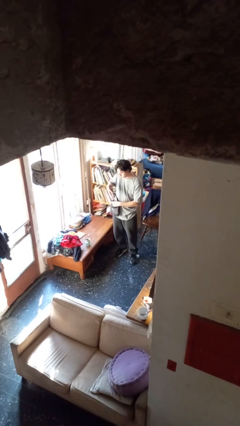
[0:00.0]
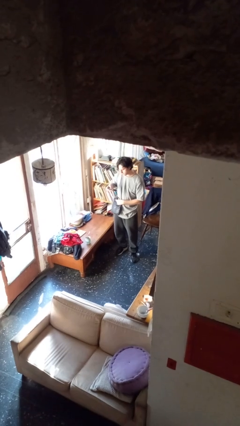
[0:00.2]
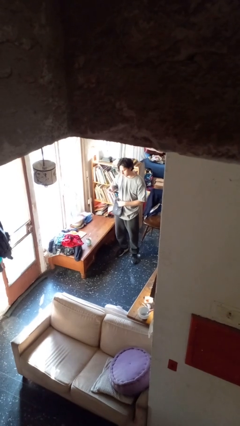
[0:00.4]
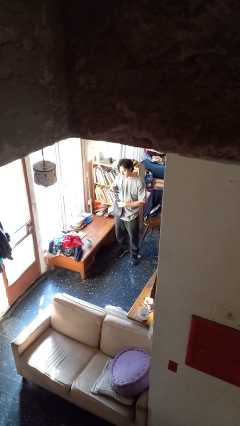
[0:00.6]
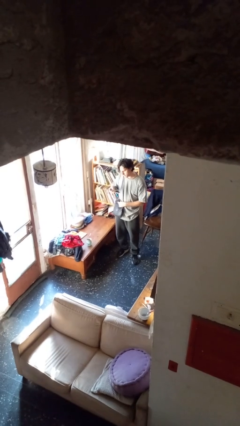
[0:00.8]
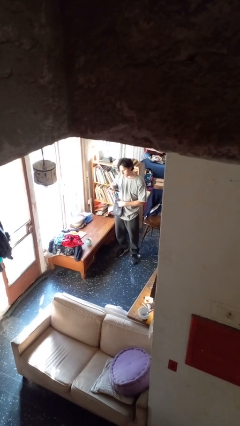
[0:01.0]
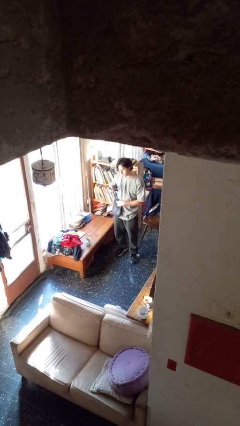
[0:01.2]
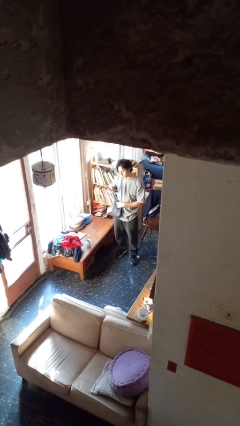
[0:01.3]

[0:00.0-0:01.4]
person takes object from purse

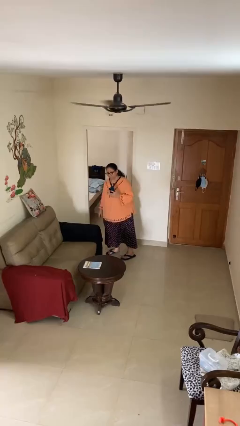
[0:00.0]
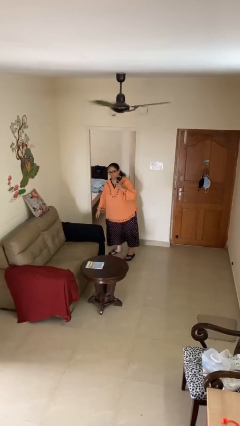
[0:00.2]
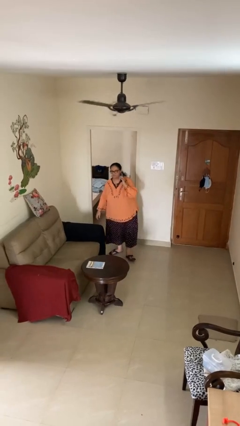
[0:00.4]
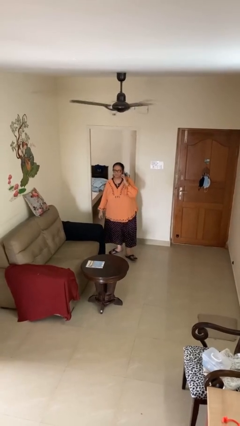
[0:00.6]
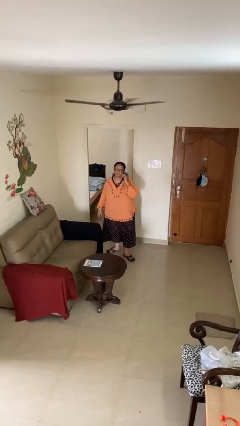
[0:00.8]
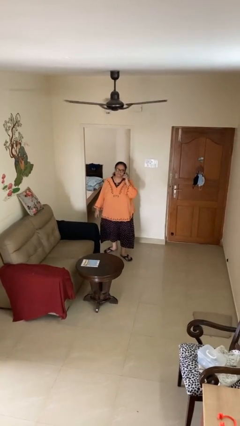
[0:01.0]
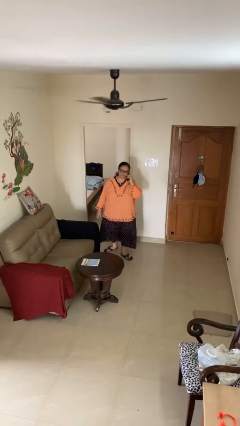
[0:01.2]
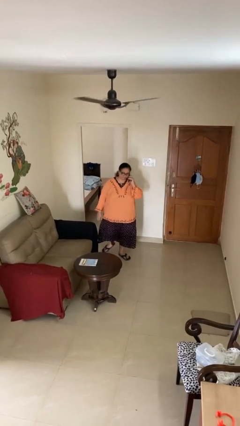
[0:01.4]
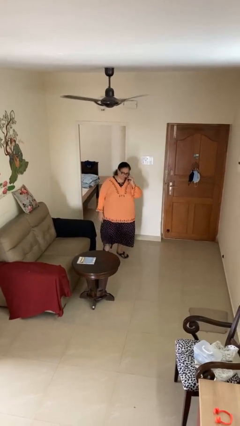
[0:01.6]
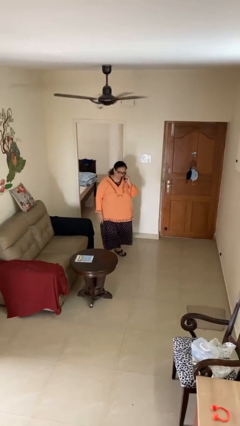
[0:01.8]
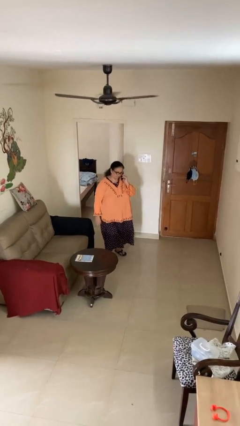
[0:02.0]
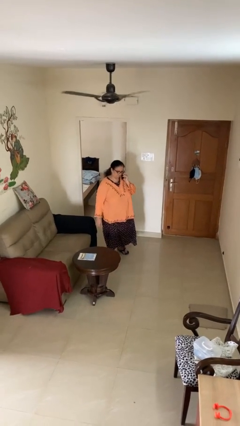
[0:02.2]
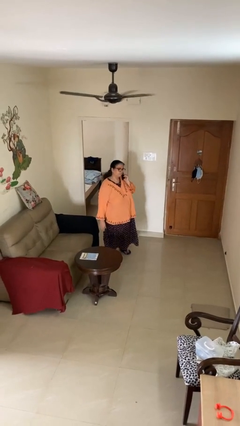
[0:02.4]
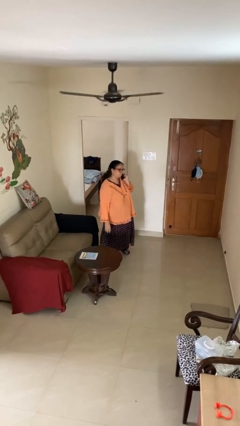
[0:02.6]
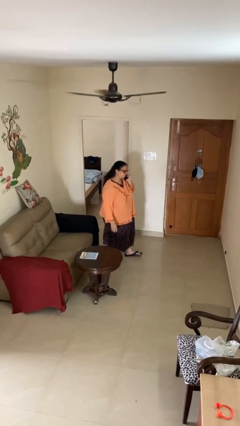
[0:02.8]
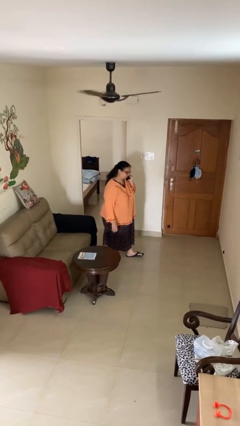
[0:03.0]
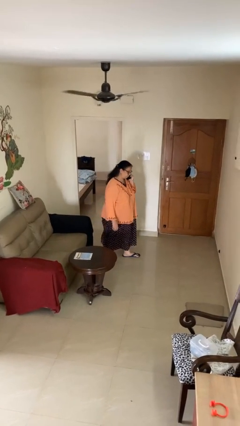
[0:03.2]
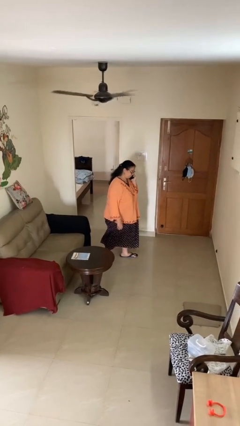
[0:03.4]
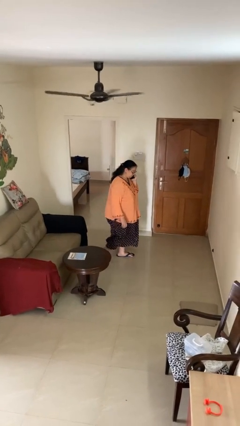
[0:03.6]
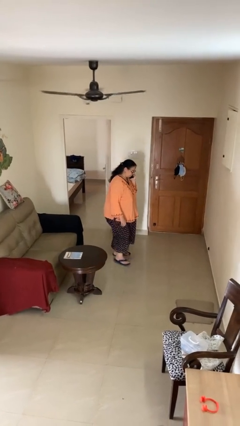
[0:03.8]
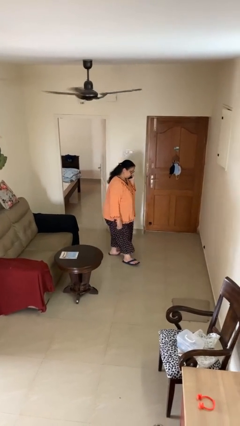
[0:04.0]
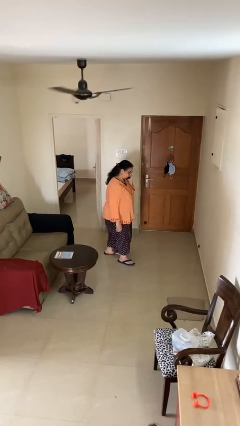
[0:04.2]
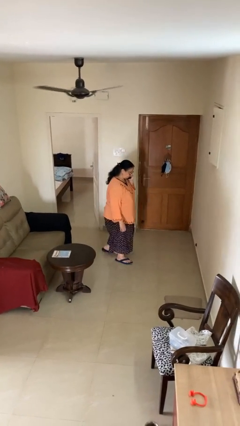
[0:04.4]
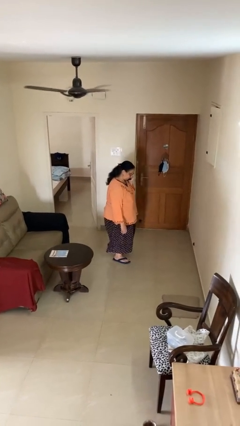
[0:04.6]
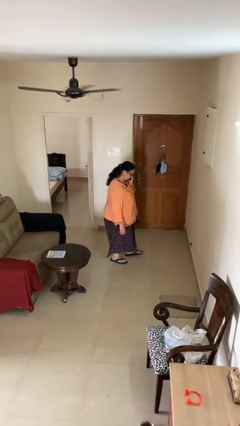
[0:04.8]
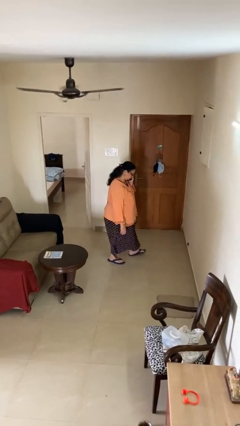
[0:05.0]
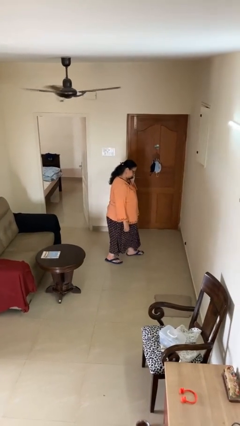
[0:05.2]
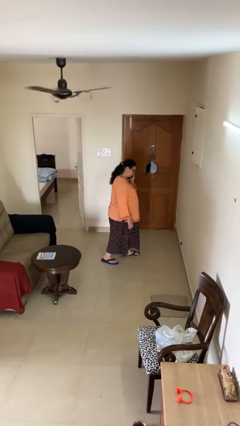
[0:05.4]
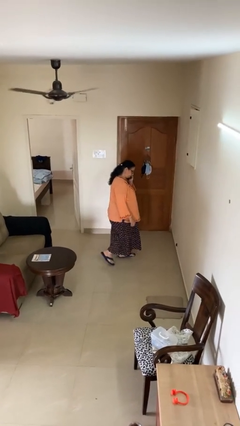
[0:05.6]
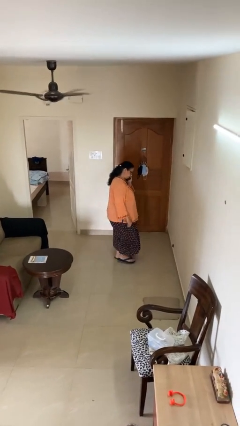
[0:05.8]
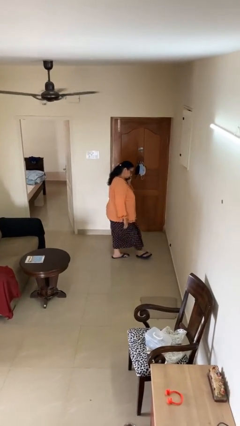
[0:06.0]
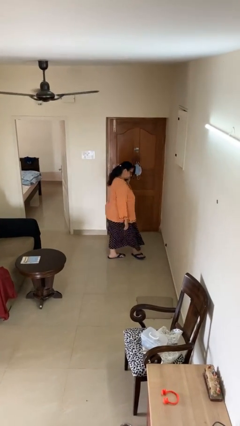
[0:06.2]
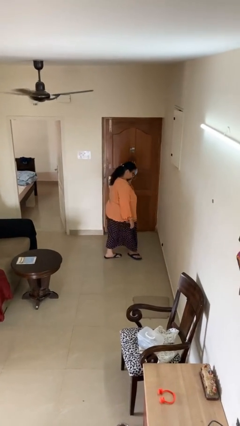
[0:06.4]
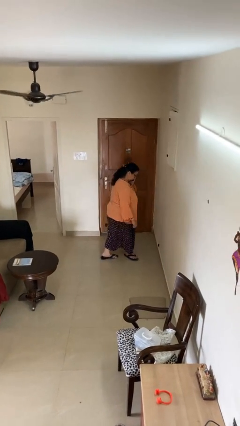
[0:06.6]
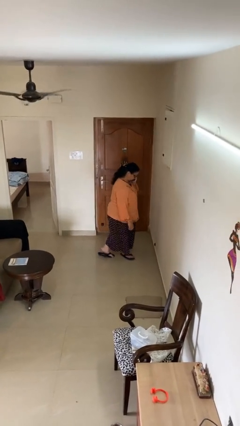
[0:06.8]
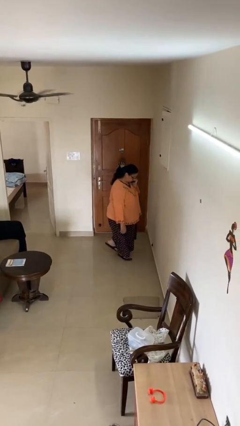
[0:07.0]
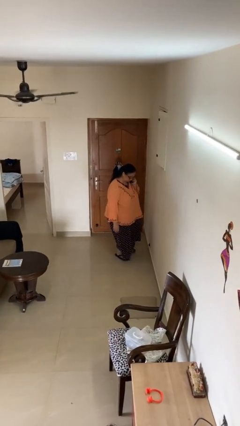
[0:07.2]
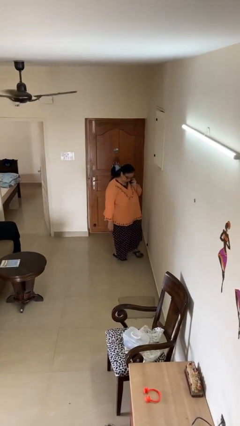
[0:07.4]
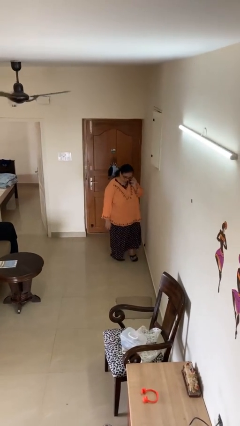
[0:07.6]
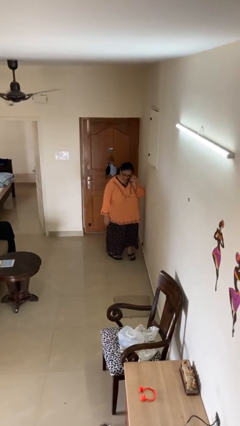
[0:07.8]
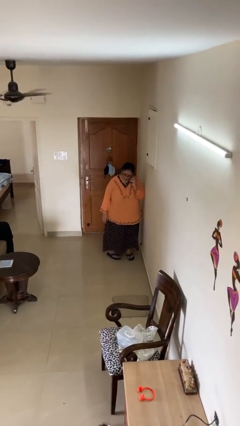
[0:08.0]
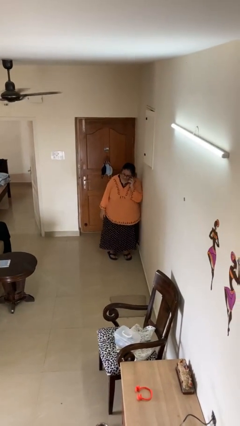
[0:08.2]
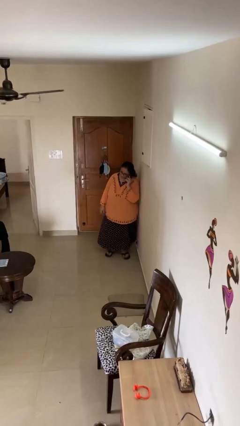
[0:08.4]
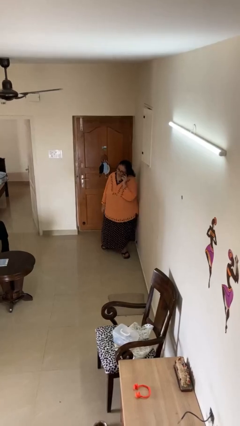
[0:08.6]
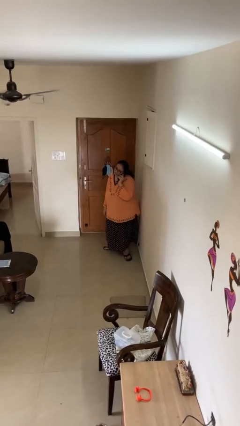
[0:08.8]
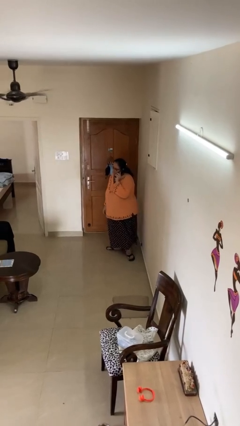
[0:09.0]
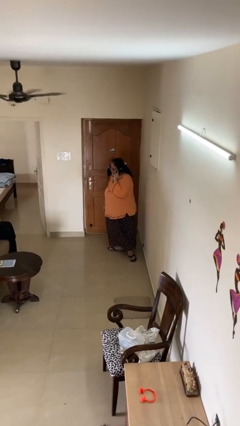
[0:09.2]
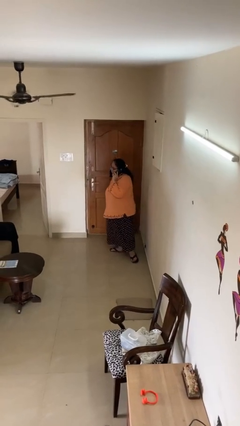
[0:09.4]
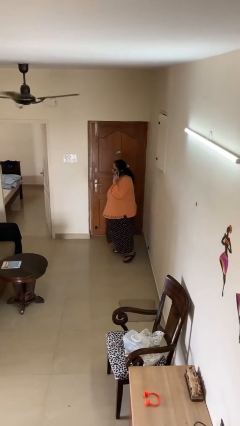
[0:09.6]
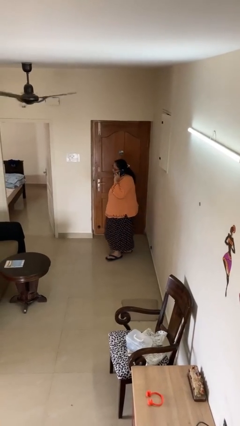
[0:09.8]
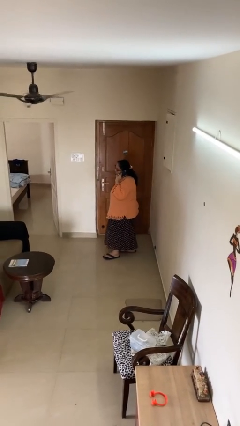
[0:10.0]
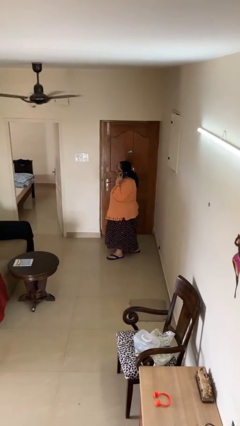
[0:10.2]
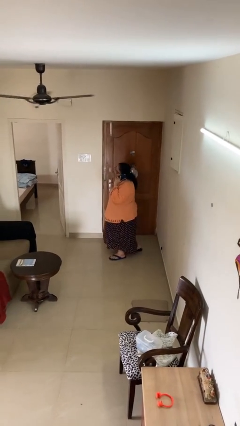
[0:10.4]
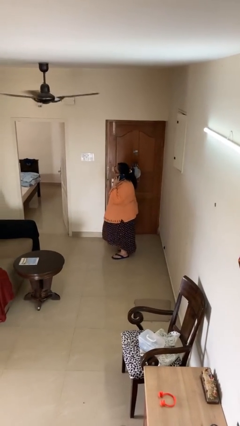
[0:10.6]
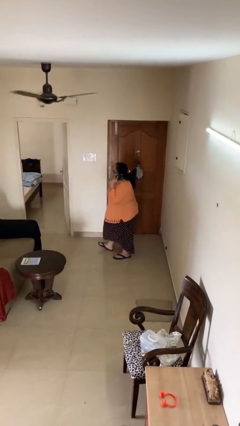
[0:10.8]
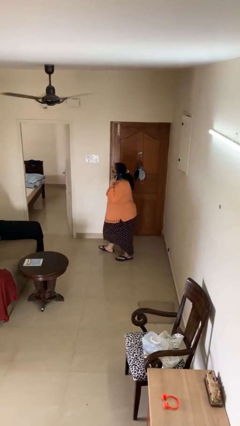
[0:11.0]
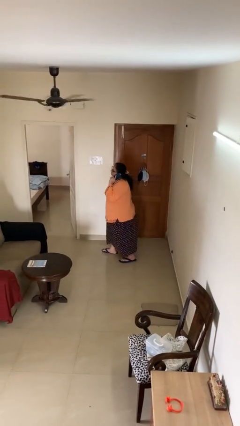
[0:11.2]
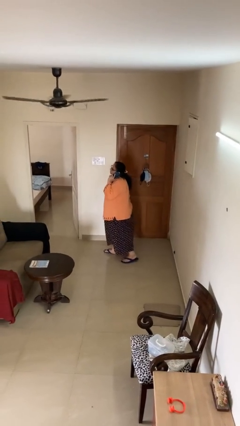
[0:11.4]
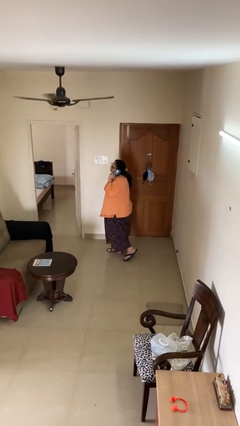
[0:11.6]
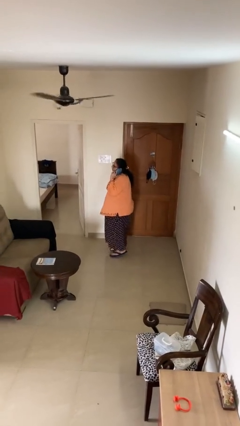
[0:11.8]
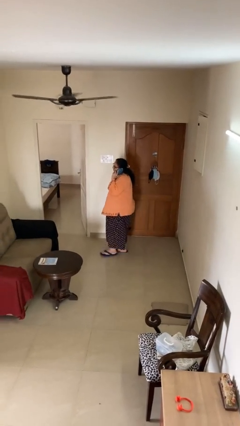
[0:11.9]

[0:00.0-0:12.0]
person talks on phone

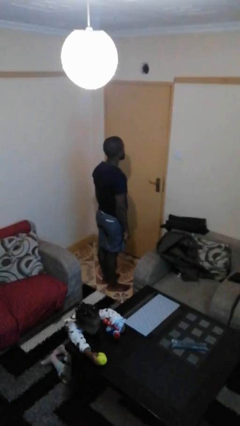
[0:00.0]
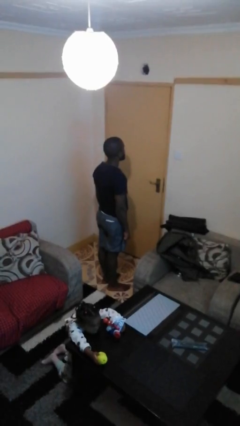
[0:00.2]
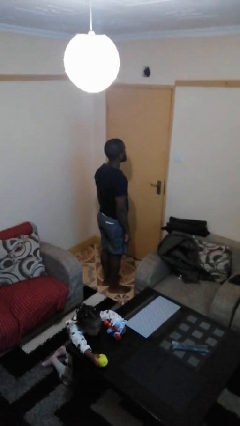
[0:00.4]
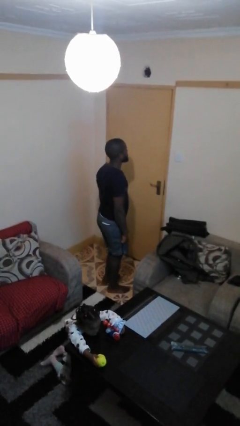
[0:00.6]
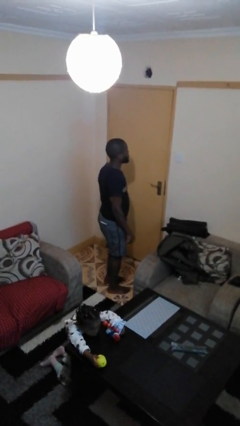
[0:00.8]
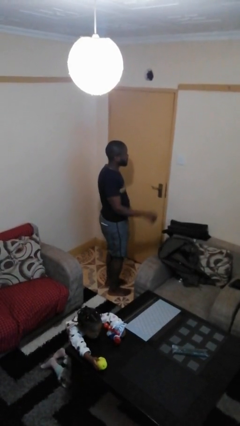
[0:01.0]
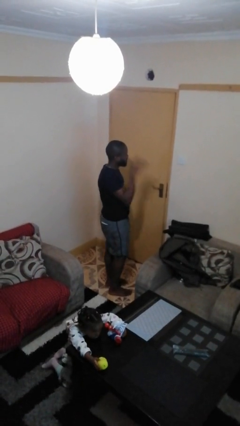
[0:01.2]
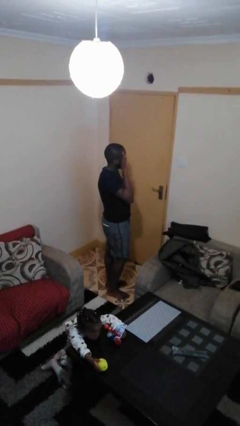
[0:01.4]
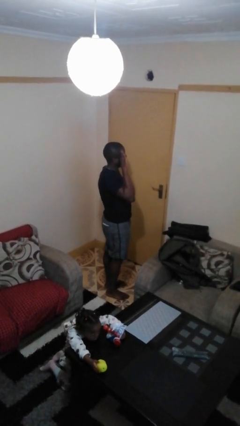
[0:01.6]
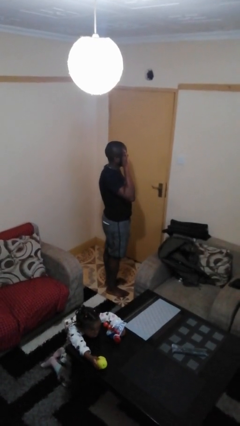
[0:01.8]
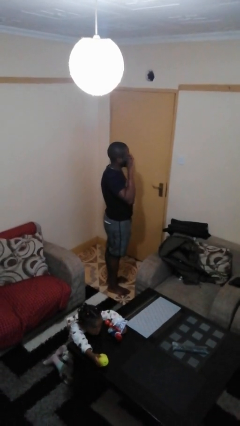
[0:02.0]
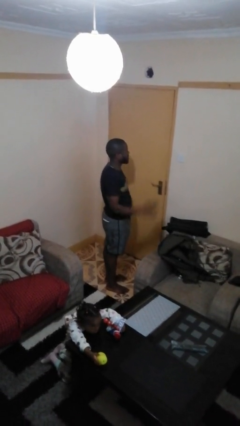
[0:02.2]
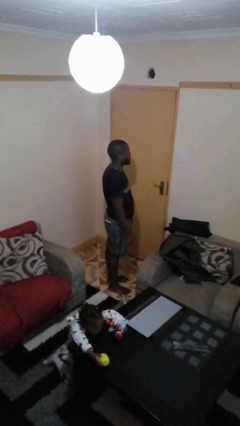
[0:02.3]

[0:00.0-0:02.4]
person salutes

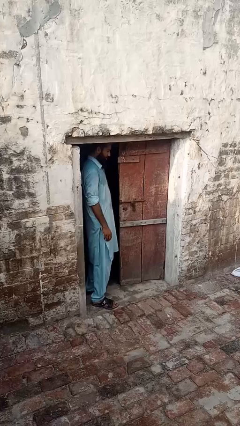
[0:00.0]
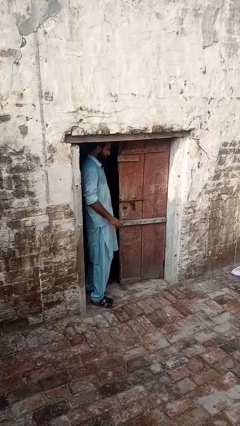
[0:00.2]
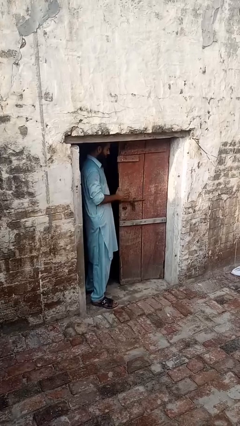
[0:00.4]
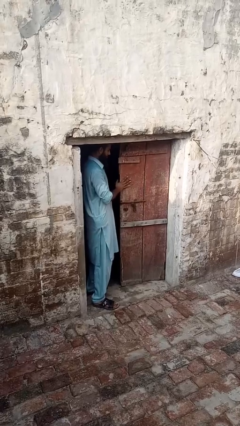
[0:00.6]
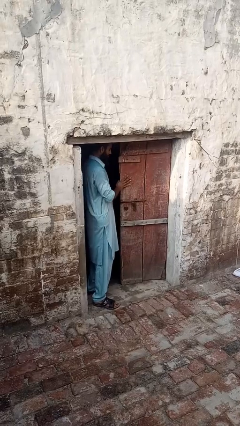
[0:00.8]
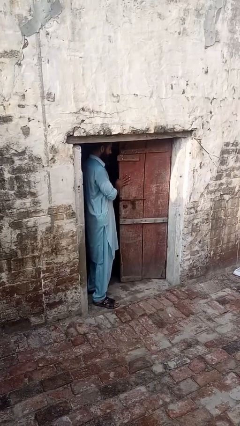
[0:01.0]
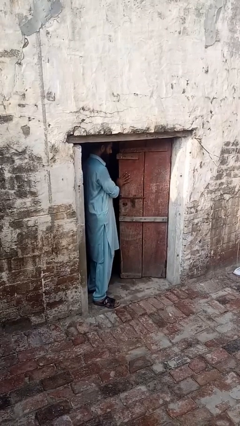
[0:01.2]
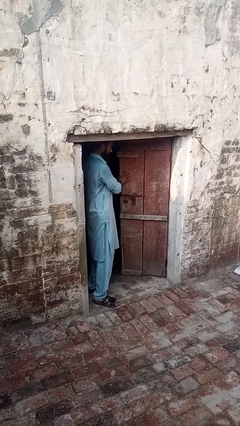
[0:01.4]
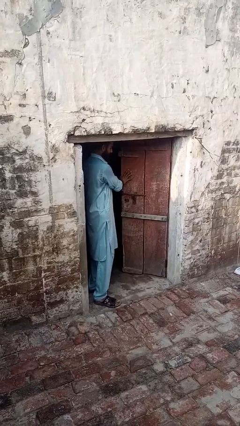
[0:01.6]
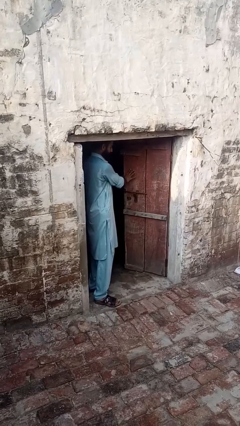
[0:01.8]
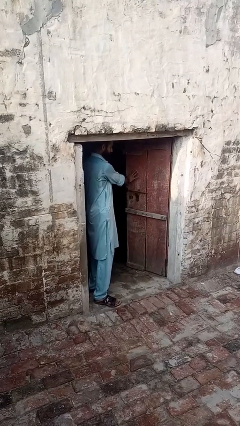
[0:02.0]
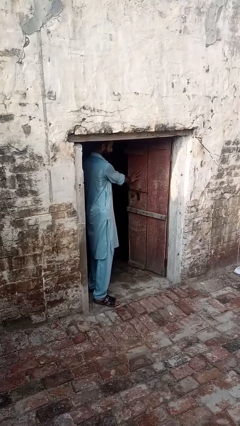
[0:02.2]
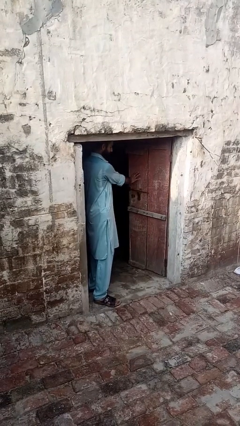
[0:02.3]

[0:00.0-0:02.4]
person opens facility door
